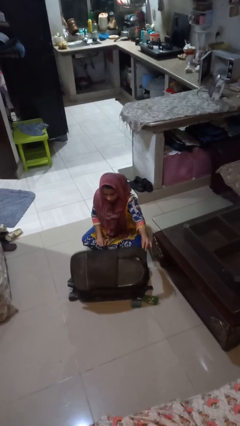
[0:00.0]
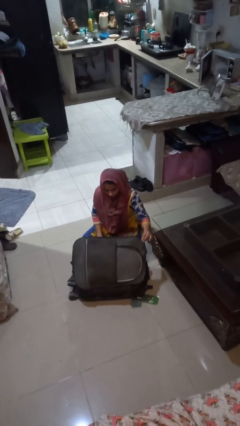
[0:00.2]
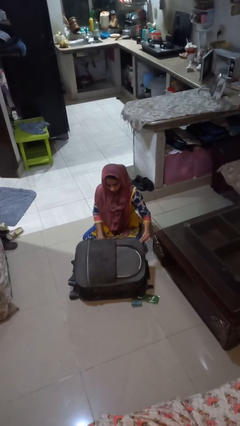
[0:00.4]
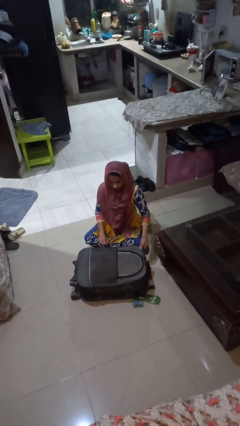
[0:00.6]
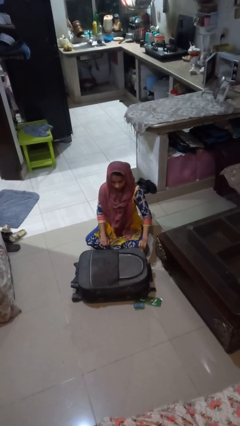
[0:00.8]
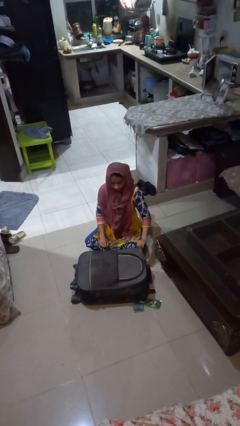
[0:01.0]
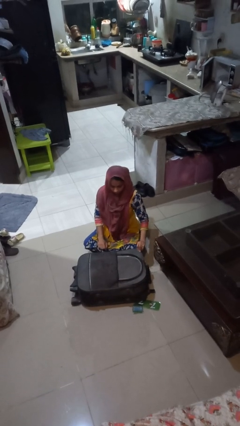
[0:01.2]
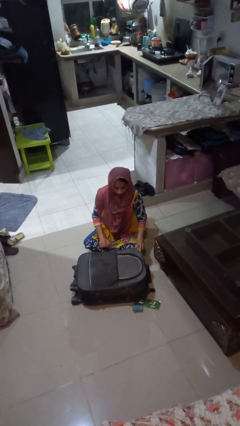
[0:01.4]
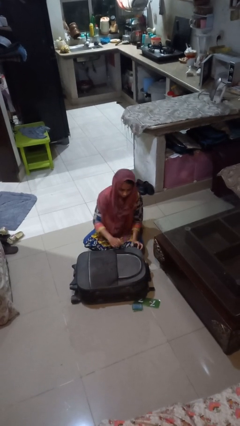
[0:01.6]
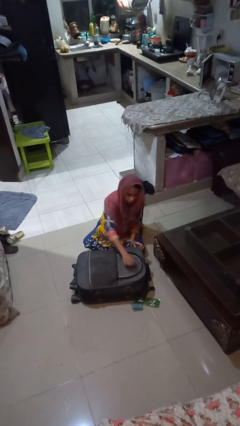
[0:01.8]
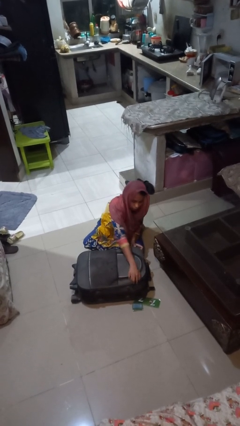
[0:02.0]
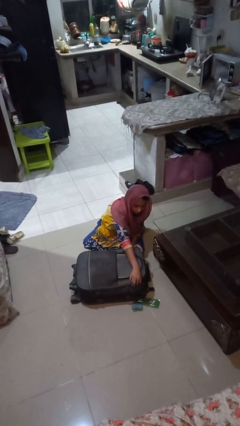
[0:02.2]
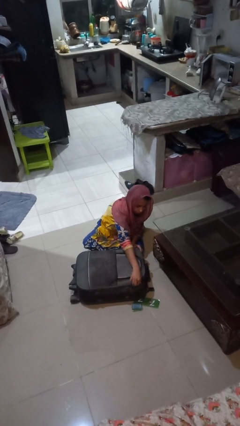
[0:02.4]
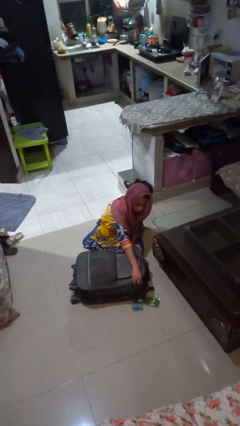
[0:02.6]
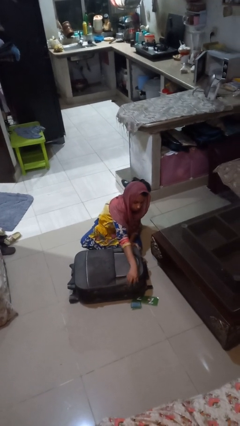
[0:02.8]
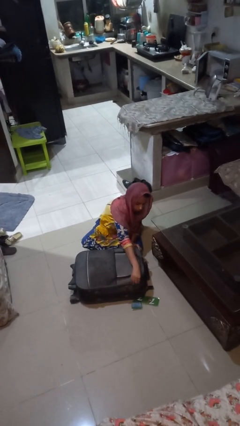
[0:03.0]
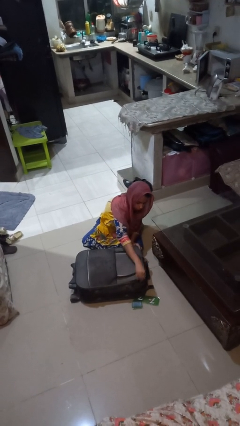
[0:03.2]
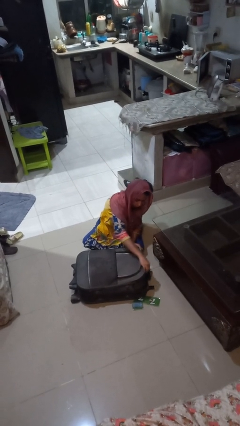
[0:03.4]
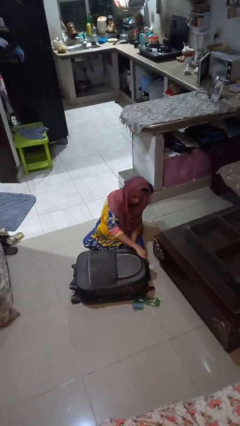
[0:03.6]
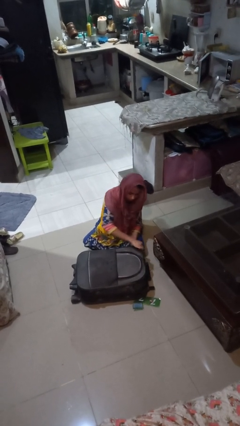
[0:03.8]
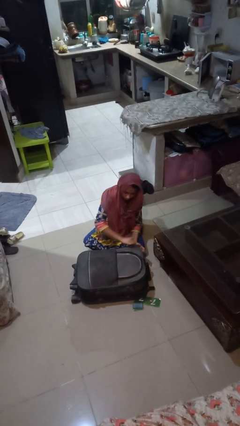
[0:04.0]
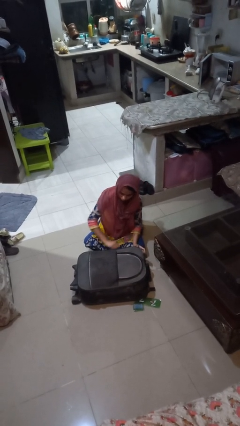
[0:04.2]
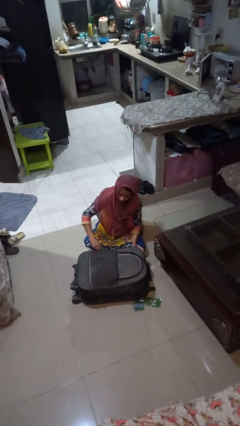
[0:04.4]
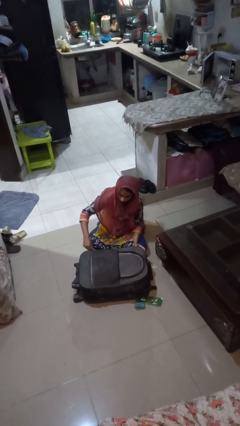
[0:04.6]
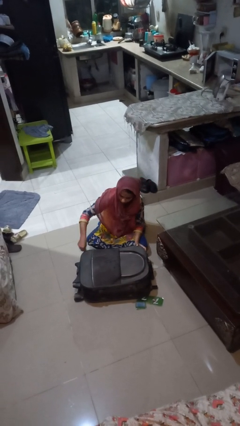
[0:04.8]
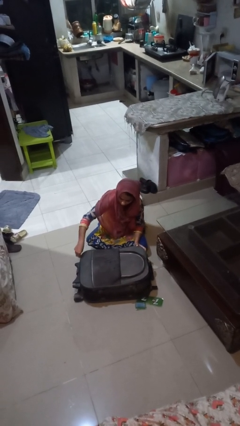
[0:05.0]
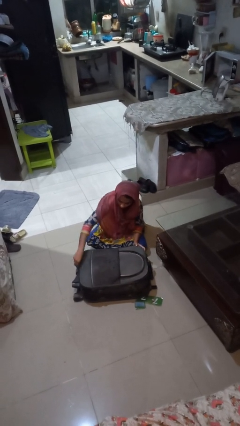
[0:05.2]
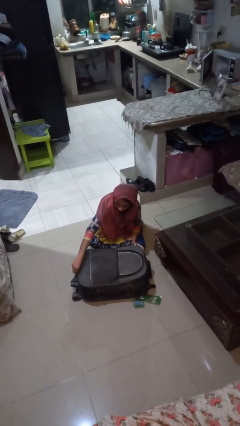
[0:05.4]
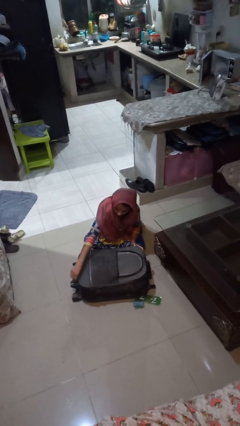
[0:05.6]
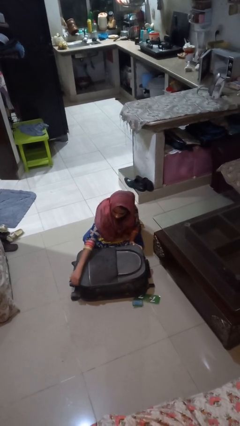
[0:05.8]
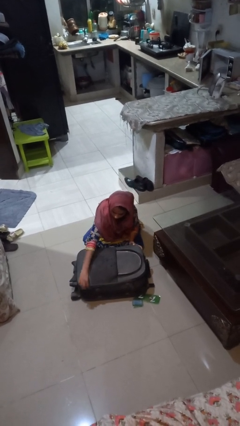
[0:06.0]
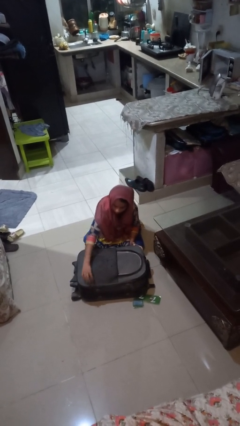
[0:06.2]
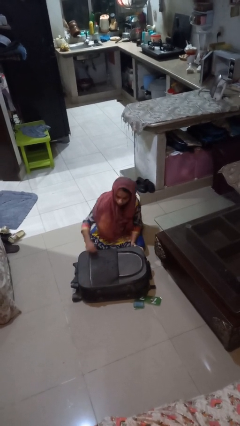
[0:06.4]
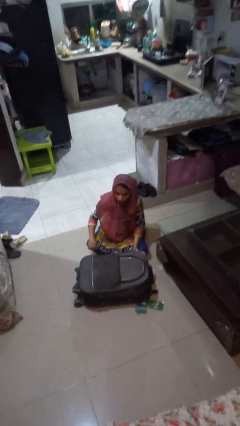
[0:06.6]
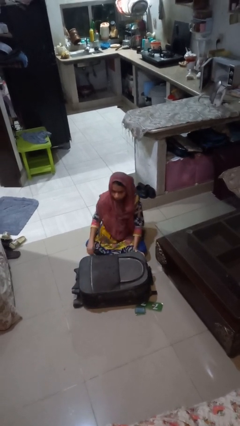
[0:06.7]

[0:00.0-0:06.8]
person closes suitcase

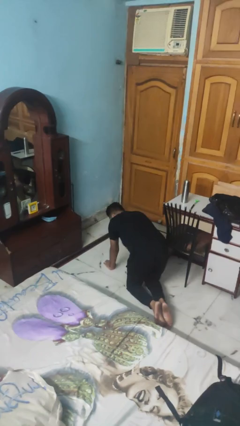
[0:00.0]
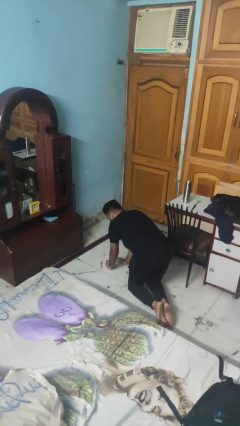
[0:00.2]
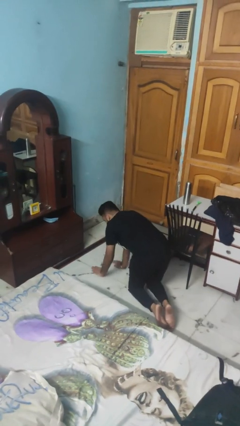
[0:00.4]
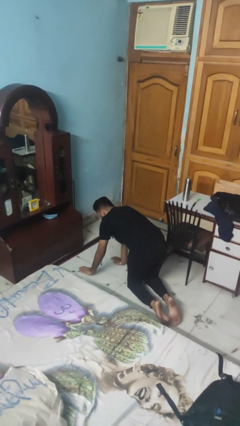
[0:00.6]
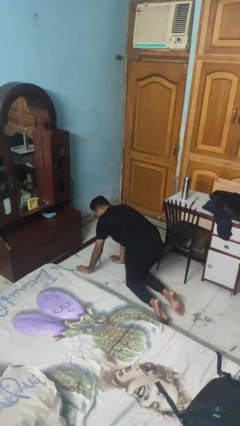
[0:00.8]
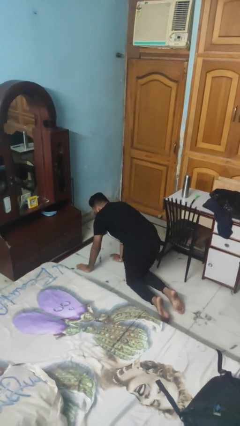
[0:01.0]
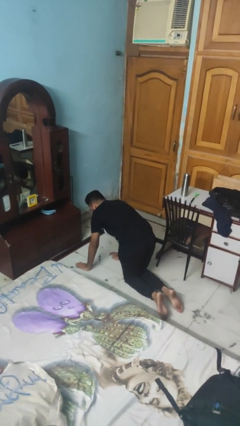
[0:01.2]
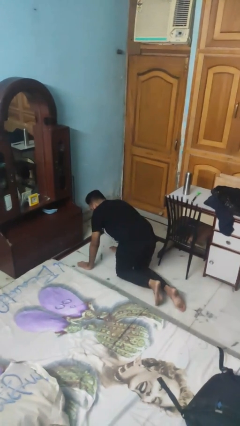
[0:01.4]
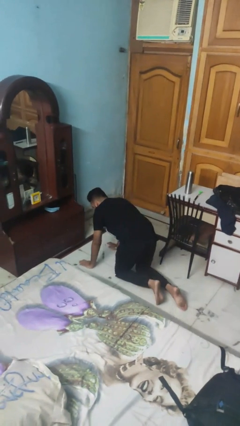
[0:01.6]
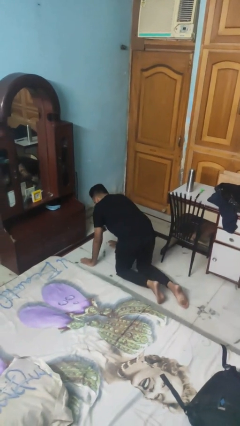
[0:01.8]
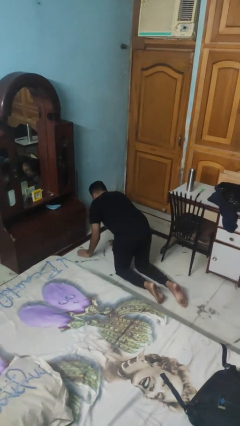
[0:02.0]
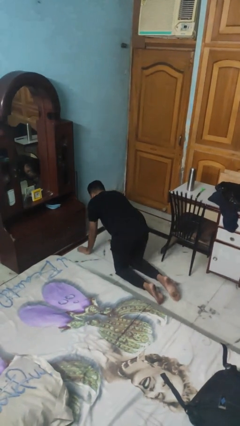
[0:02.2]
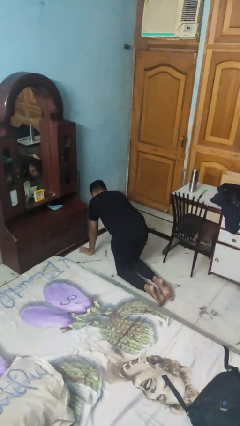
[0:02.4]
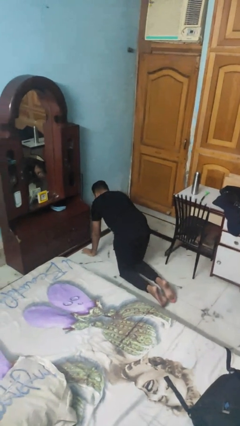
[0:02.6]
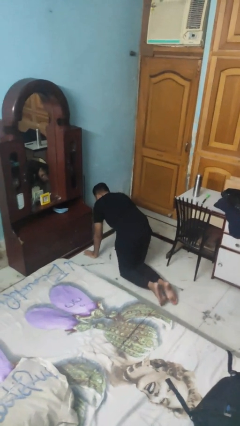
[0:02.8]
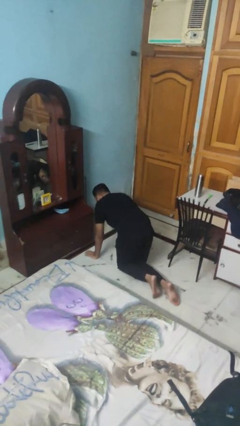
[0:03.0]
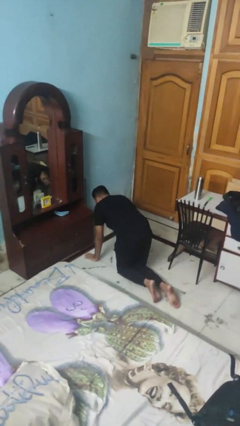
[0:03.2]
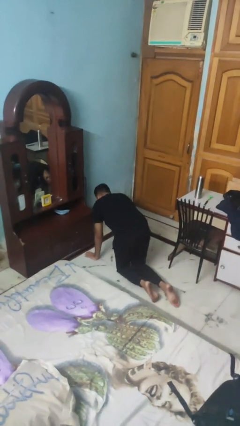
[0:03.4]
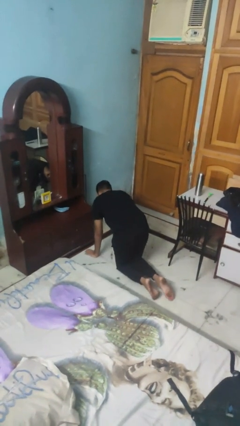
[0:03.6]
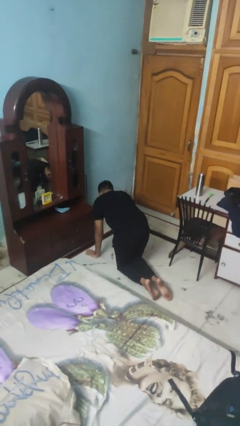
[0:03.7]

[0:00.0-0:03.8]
person crawls

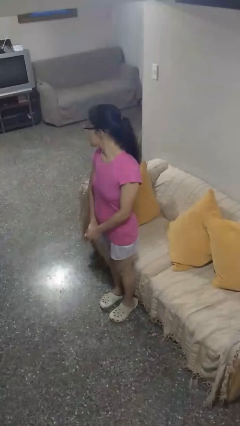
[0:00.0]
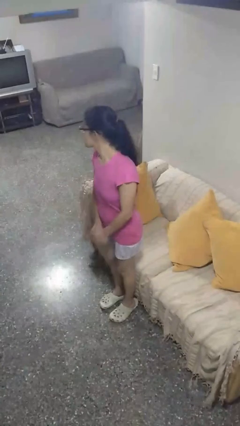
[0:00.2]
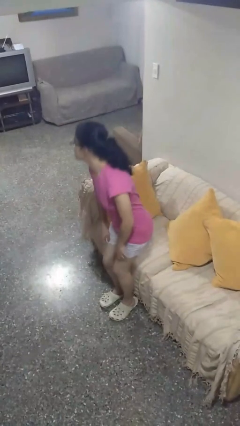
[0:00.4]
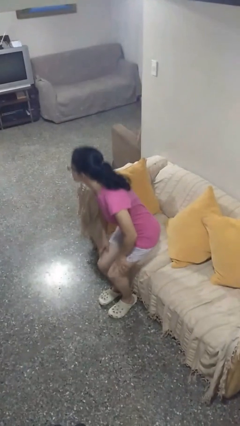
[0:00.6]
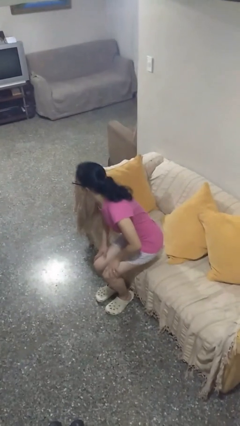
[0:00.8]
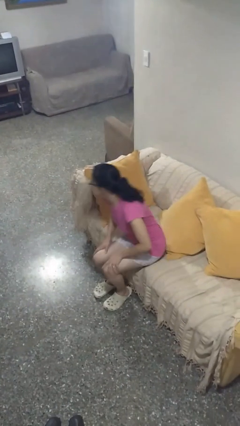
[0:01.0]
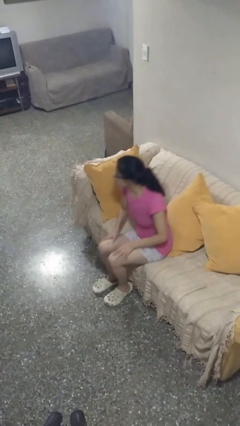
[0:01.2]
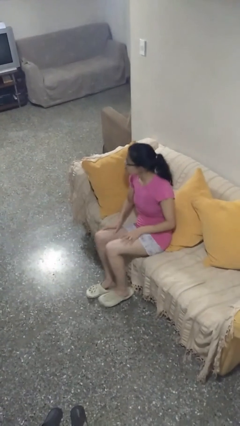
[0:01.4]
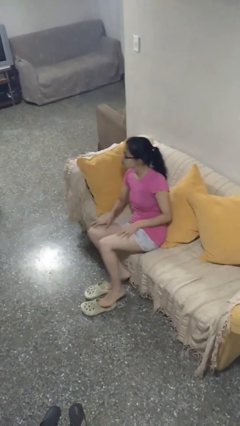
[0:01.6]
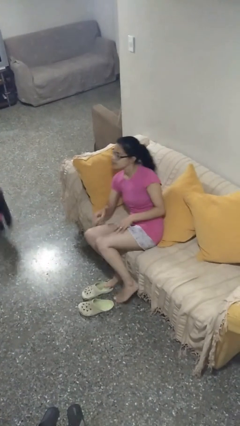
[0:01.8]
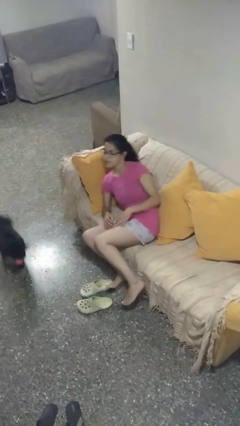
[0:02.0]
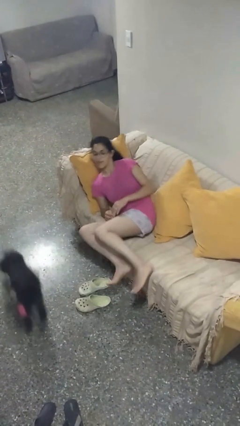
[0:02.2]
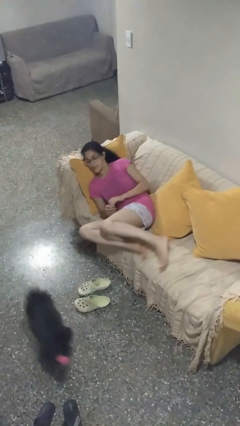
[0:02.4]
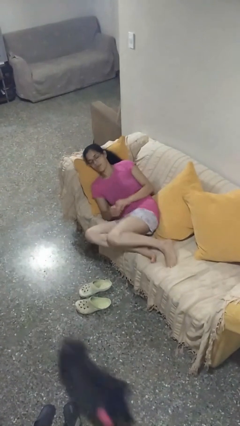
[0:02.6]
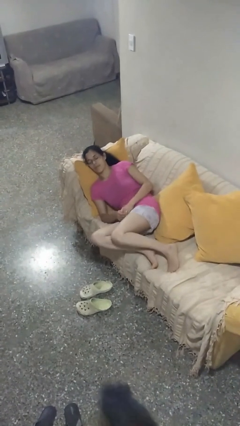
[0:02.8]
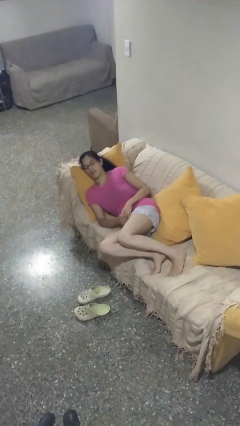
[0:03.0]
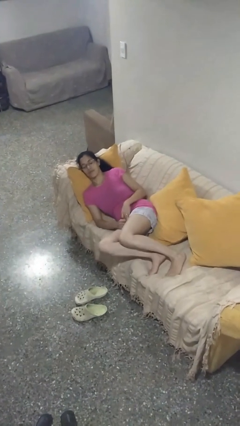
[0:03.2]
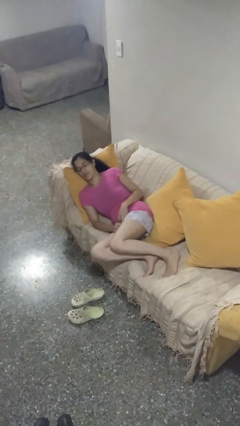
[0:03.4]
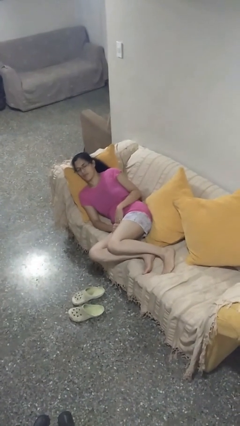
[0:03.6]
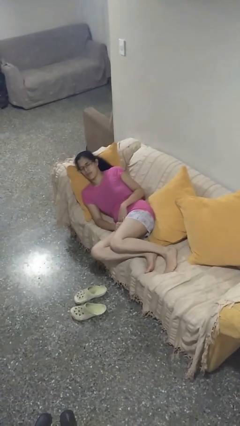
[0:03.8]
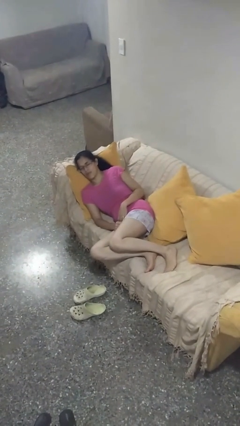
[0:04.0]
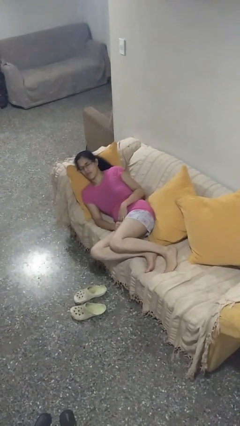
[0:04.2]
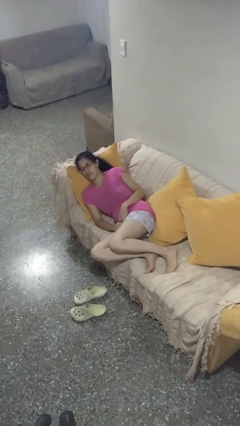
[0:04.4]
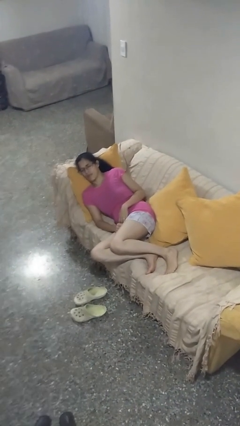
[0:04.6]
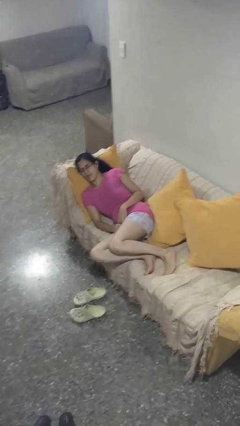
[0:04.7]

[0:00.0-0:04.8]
person lies down on couch

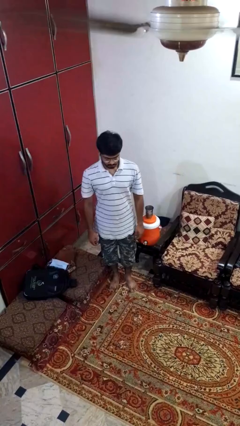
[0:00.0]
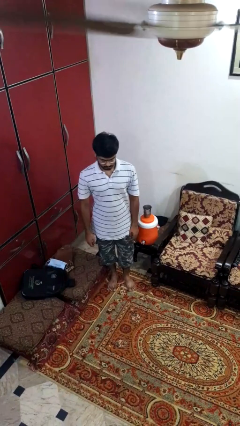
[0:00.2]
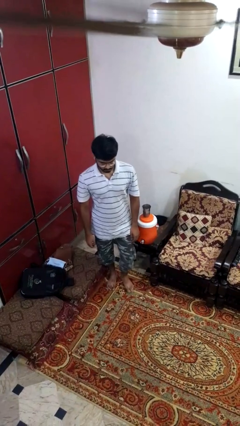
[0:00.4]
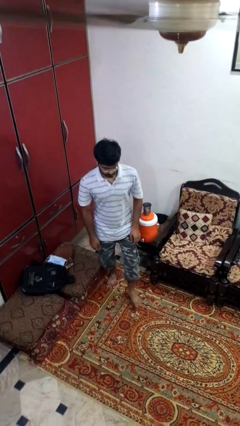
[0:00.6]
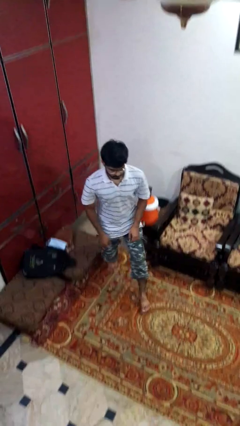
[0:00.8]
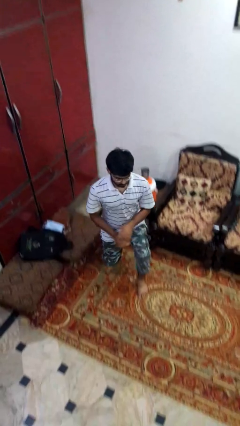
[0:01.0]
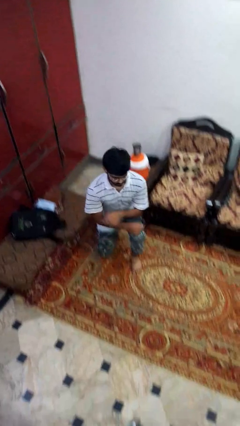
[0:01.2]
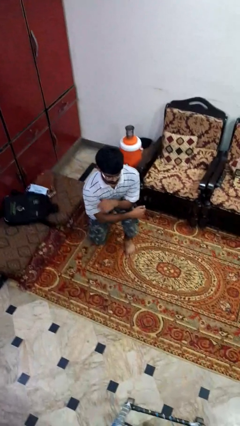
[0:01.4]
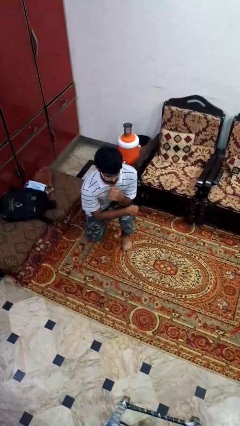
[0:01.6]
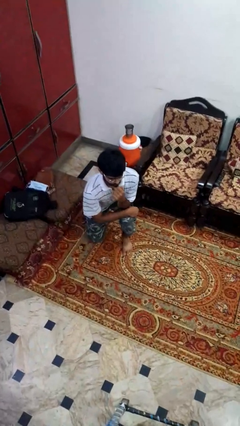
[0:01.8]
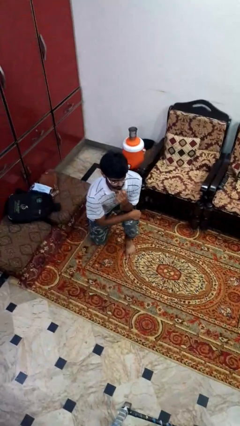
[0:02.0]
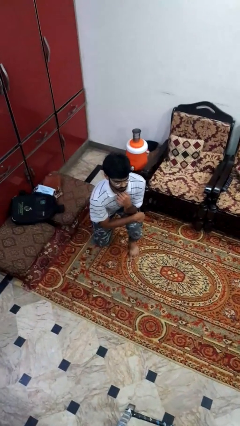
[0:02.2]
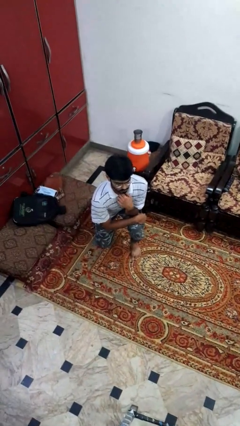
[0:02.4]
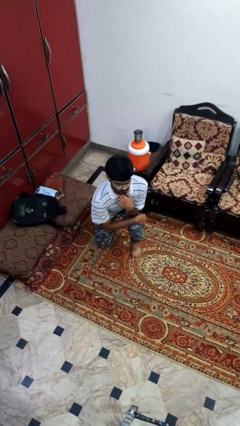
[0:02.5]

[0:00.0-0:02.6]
person kneels
